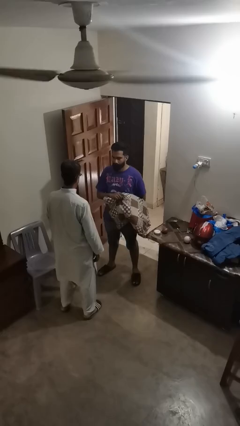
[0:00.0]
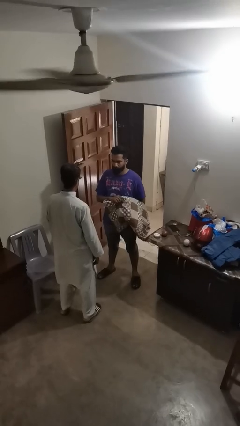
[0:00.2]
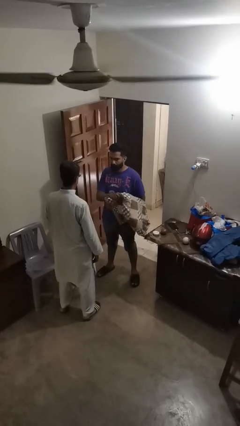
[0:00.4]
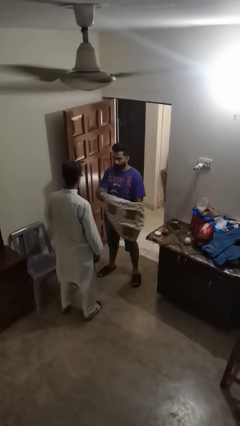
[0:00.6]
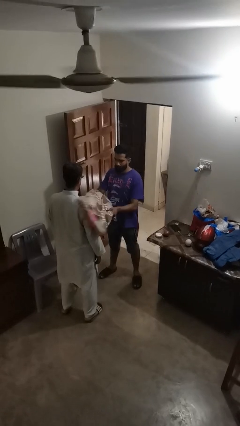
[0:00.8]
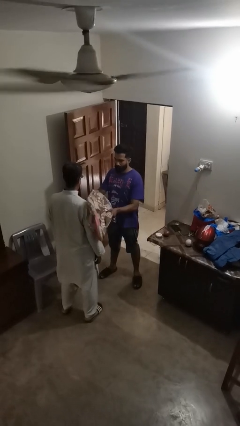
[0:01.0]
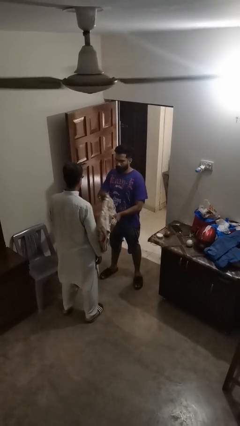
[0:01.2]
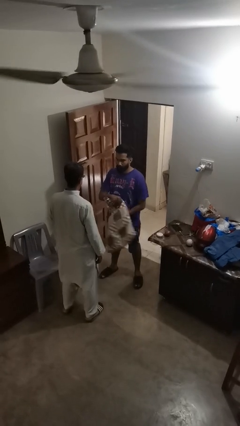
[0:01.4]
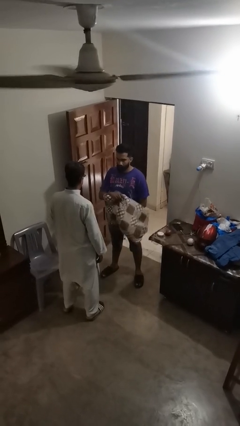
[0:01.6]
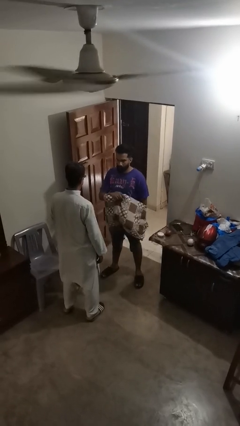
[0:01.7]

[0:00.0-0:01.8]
person hits person with pillow

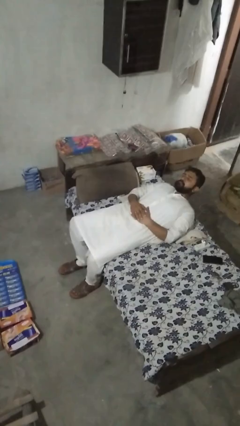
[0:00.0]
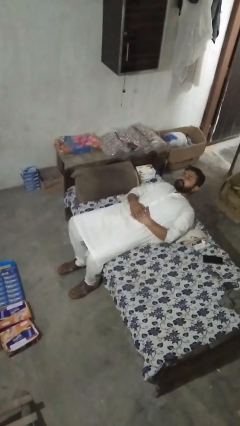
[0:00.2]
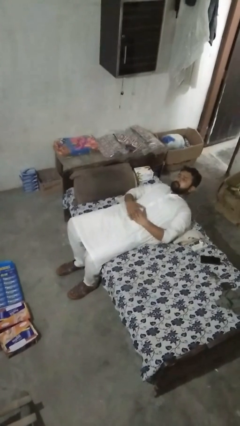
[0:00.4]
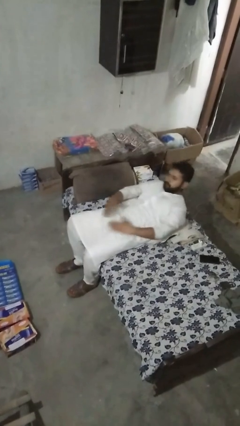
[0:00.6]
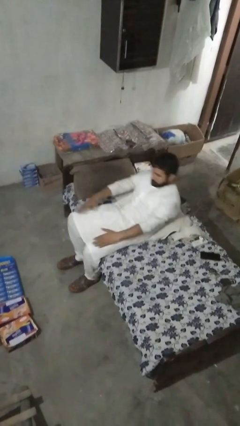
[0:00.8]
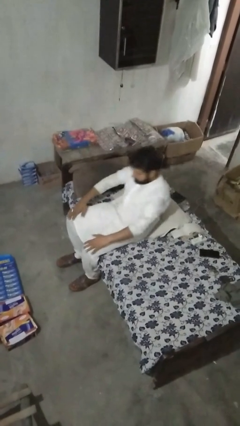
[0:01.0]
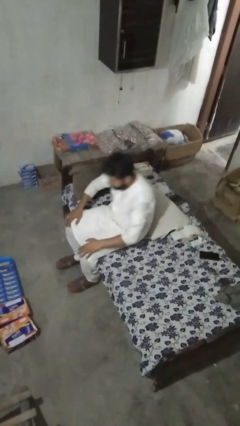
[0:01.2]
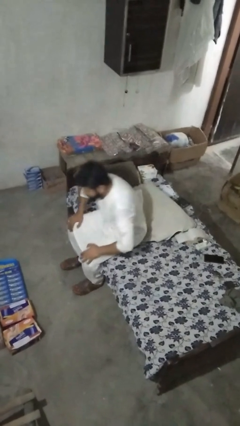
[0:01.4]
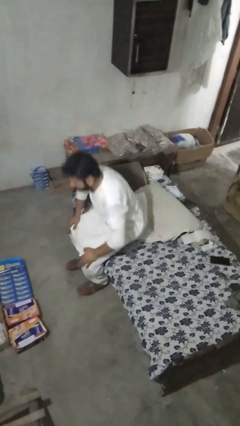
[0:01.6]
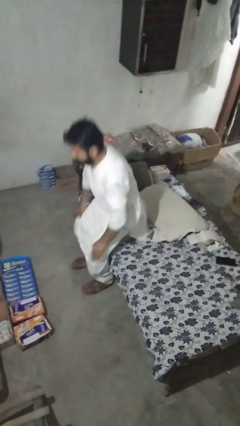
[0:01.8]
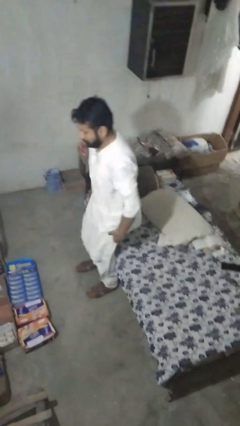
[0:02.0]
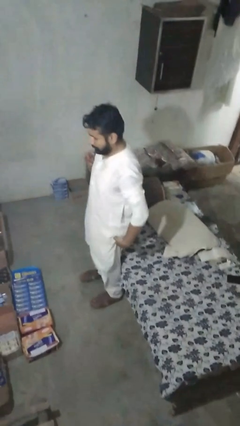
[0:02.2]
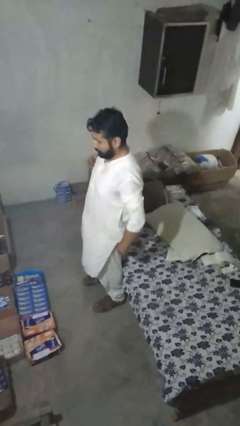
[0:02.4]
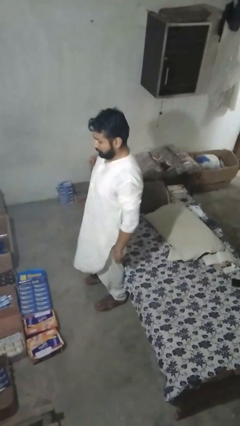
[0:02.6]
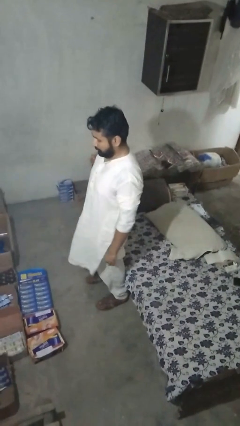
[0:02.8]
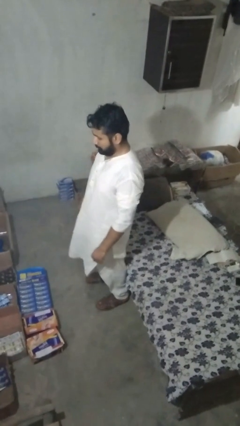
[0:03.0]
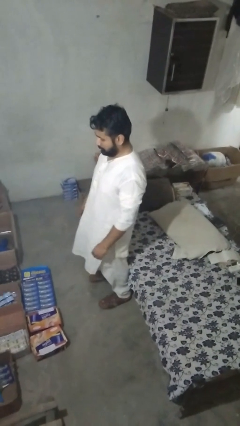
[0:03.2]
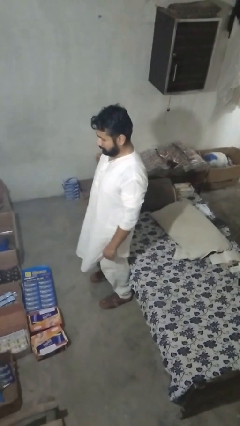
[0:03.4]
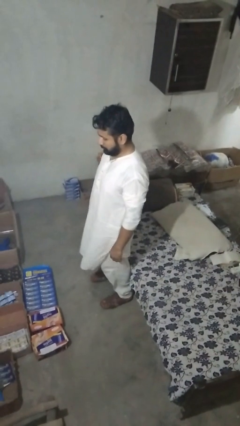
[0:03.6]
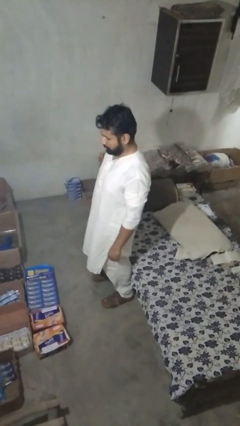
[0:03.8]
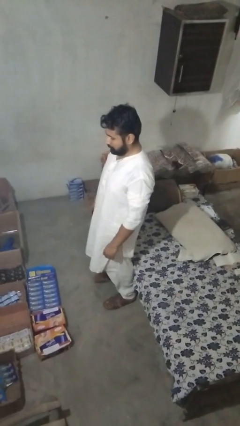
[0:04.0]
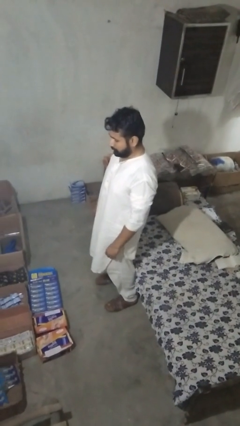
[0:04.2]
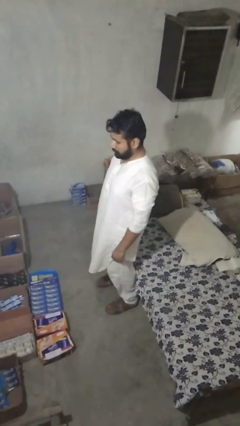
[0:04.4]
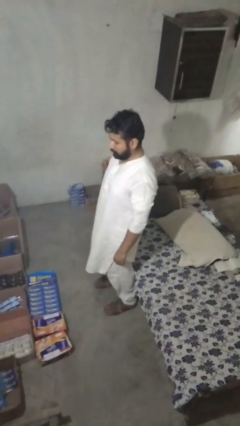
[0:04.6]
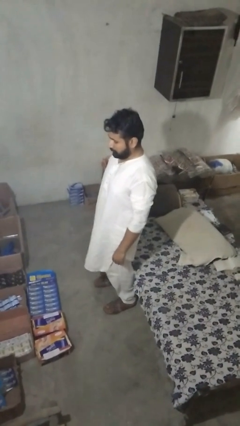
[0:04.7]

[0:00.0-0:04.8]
person stands up

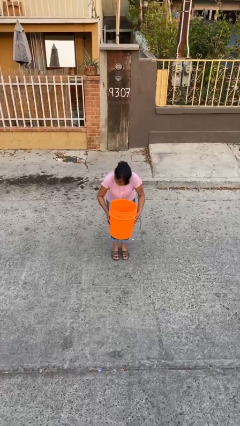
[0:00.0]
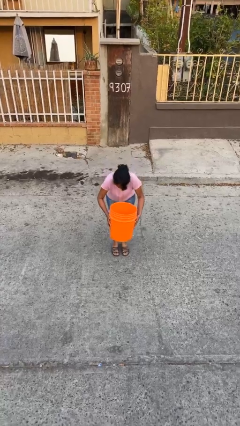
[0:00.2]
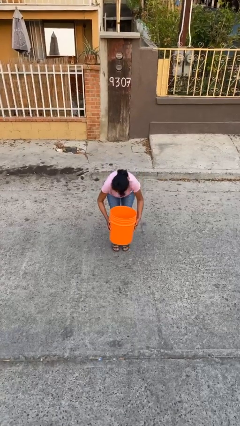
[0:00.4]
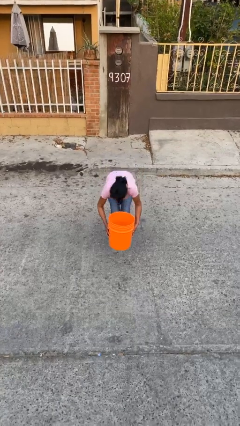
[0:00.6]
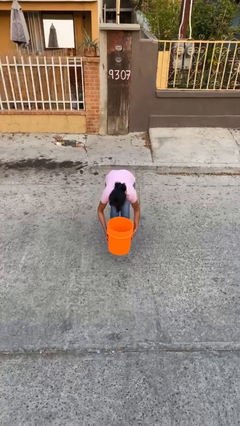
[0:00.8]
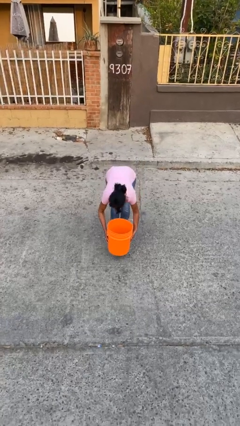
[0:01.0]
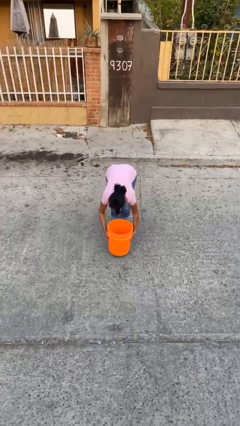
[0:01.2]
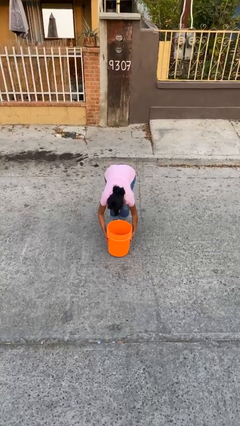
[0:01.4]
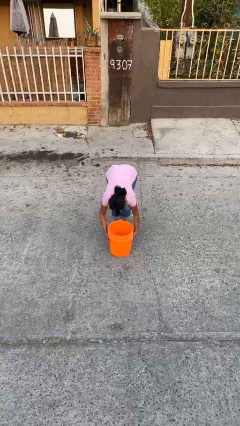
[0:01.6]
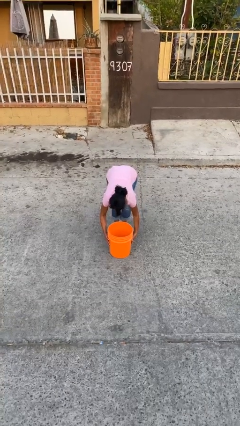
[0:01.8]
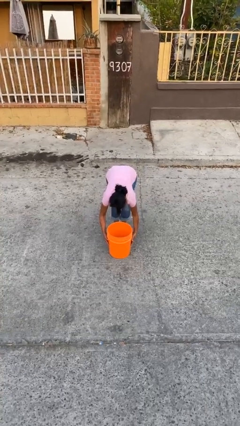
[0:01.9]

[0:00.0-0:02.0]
person puts down object on floor

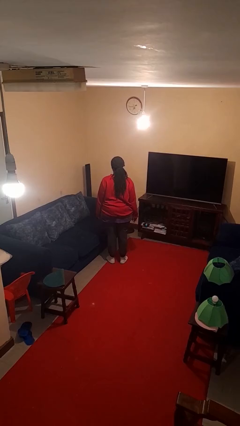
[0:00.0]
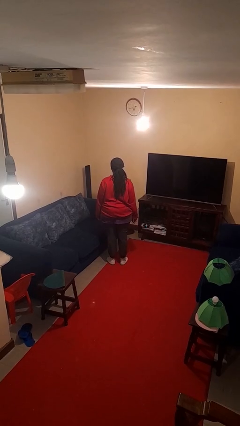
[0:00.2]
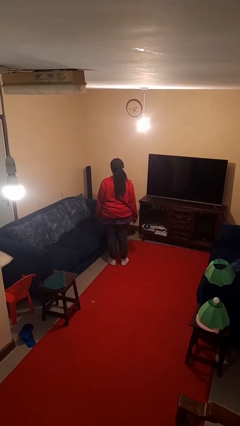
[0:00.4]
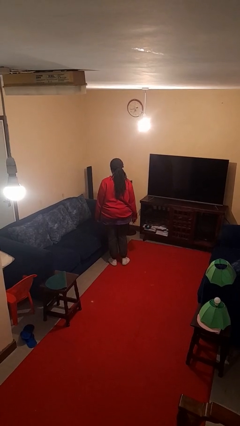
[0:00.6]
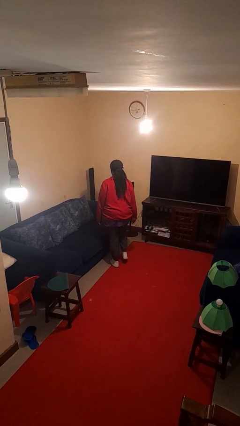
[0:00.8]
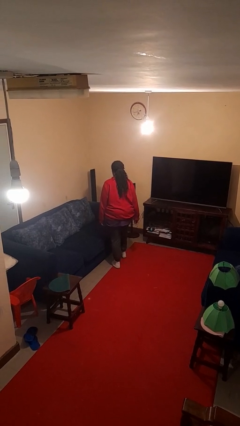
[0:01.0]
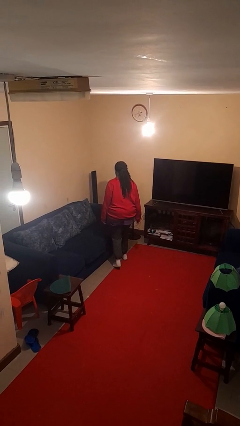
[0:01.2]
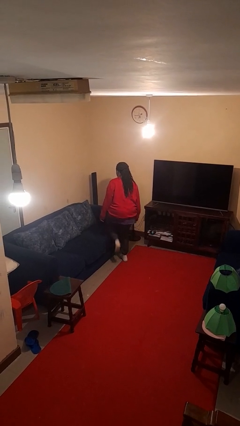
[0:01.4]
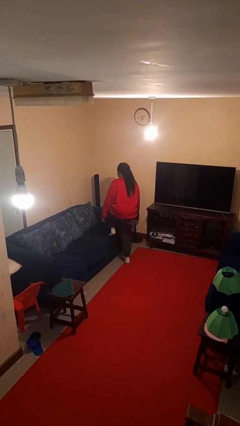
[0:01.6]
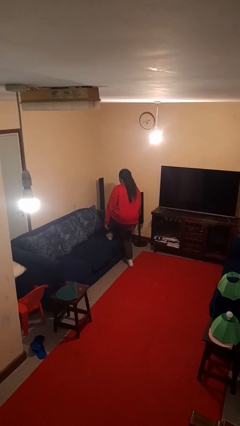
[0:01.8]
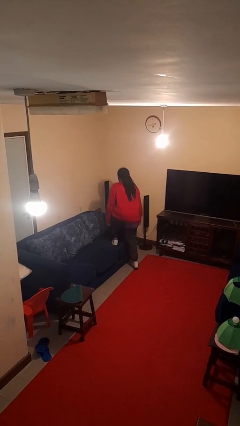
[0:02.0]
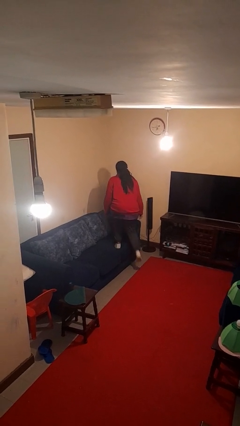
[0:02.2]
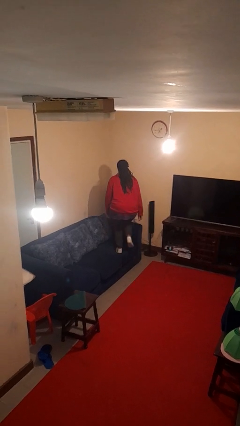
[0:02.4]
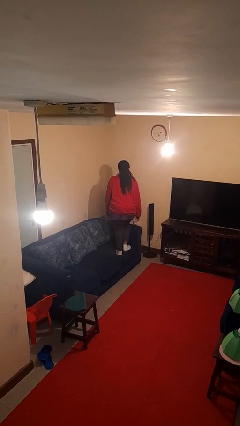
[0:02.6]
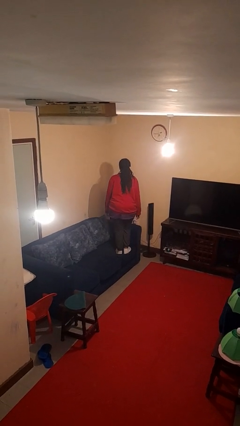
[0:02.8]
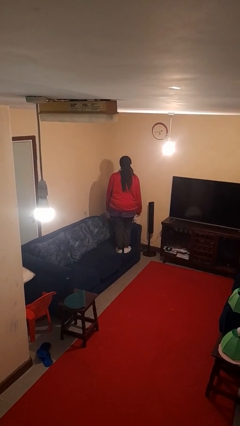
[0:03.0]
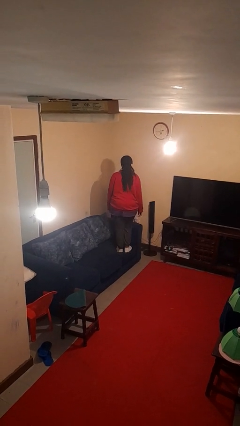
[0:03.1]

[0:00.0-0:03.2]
person climbs on couch

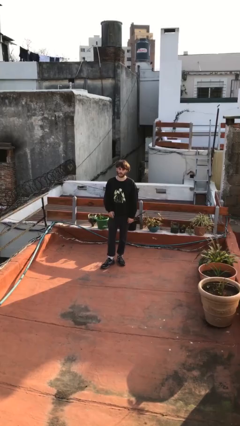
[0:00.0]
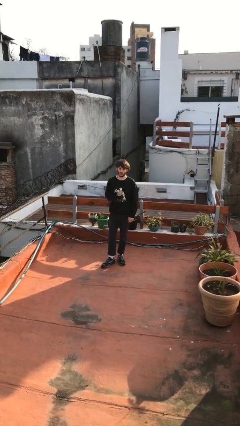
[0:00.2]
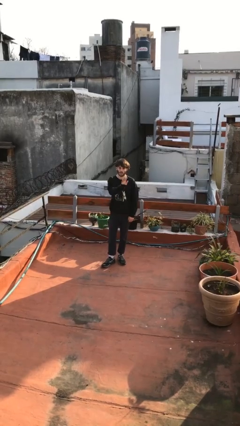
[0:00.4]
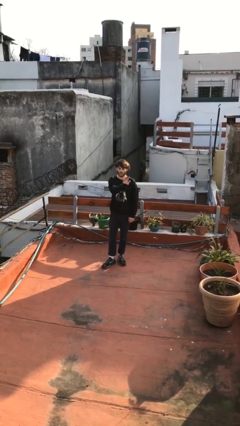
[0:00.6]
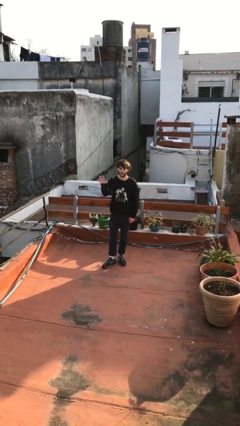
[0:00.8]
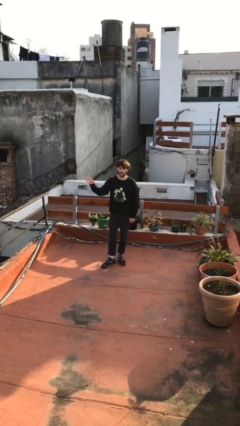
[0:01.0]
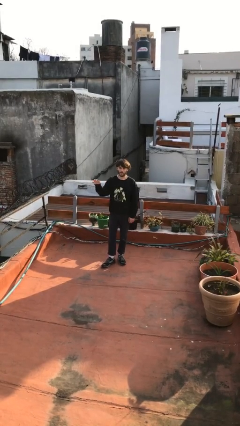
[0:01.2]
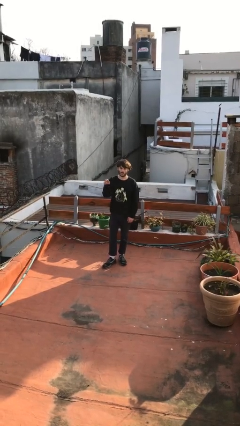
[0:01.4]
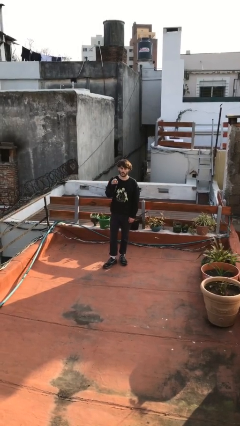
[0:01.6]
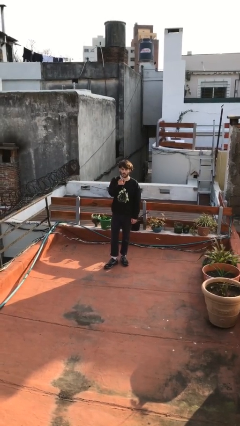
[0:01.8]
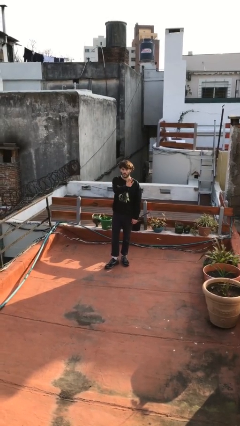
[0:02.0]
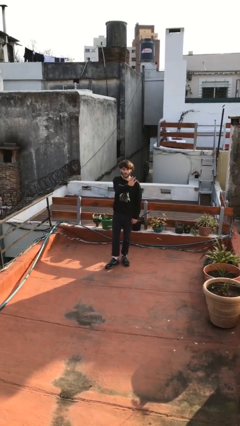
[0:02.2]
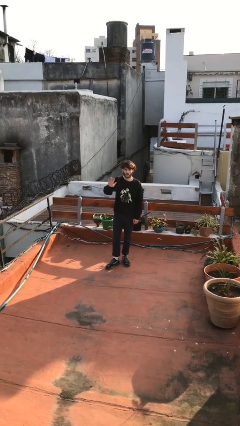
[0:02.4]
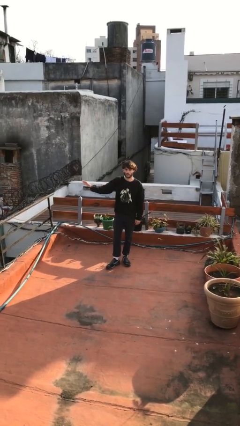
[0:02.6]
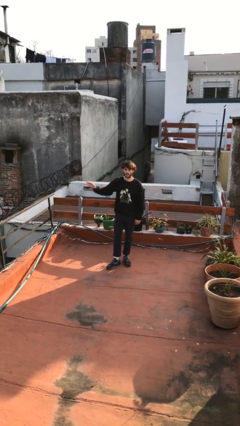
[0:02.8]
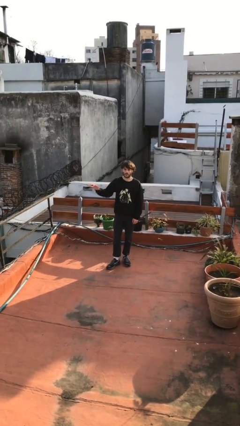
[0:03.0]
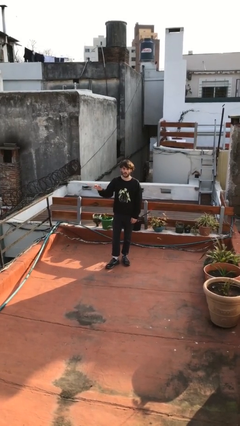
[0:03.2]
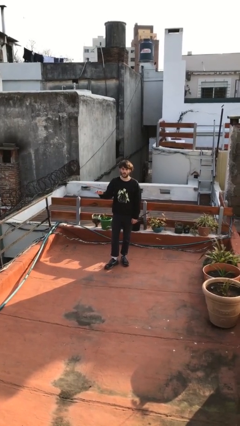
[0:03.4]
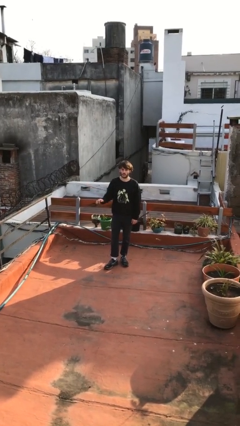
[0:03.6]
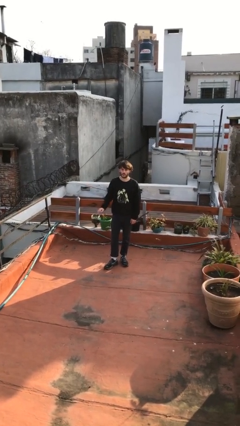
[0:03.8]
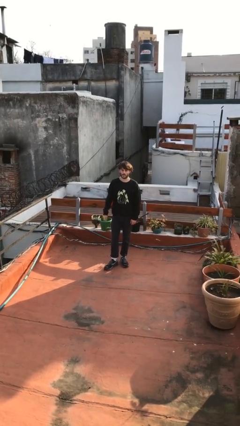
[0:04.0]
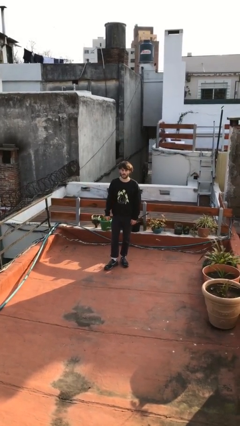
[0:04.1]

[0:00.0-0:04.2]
person gestures swipe right

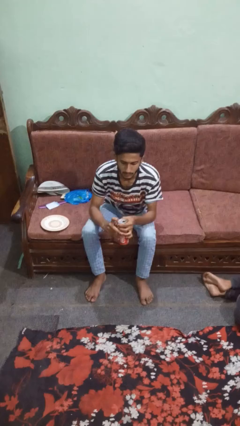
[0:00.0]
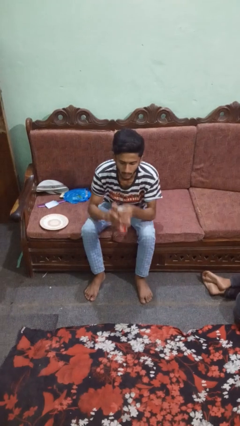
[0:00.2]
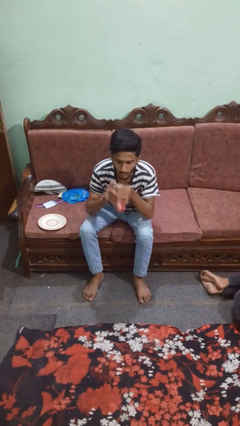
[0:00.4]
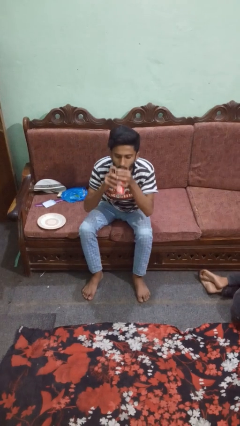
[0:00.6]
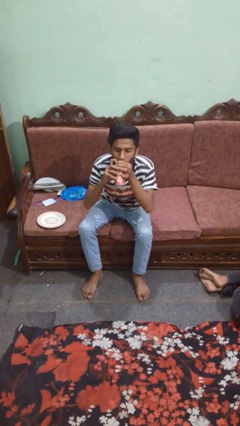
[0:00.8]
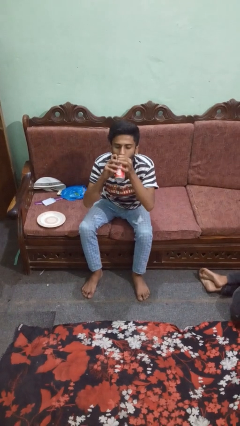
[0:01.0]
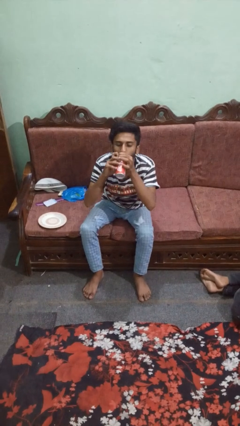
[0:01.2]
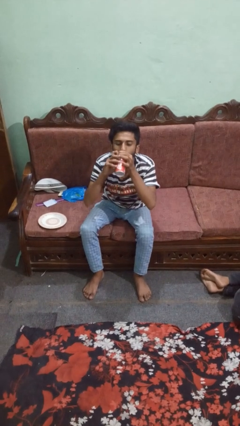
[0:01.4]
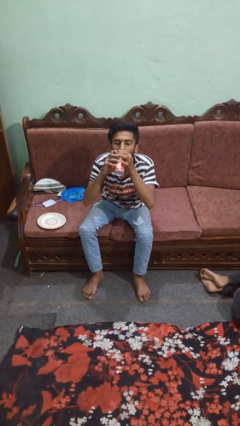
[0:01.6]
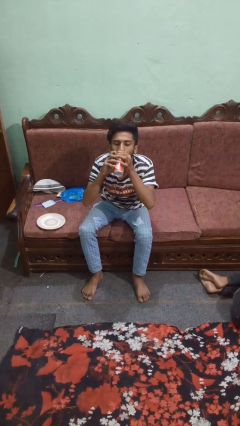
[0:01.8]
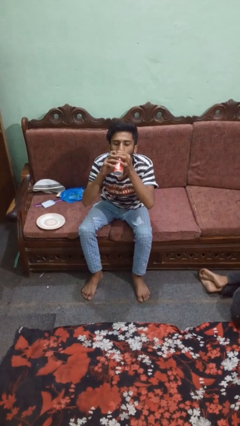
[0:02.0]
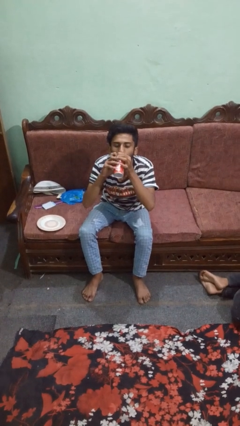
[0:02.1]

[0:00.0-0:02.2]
person drinks from beverage can
